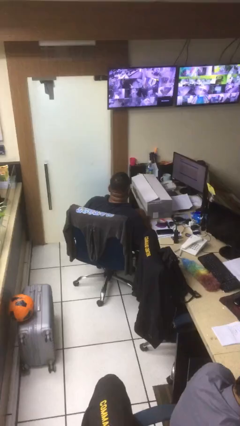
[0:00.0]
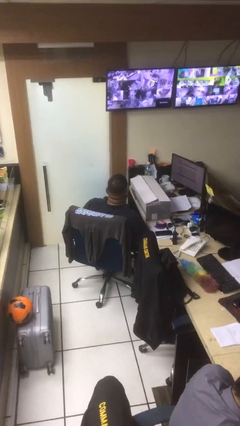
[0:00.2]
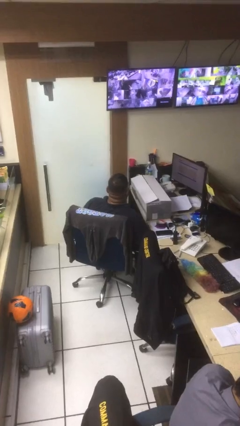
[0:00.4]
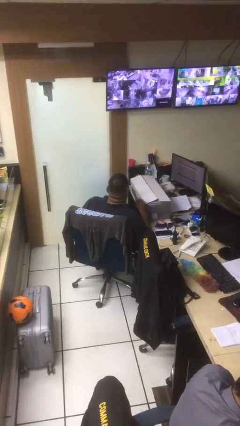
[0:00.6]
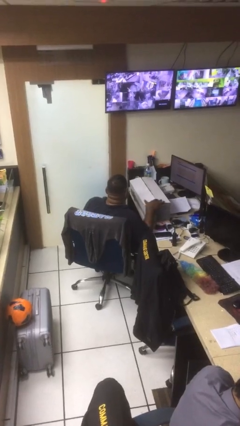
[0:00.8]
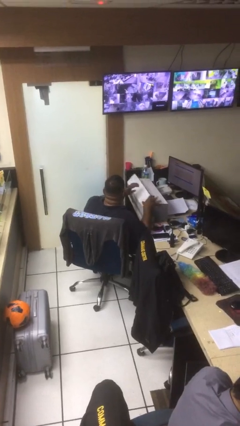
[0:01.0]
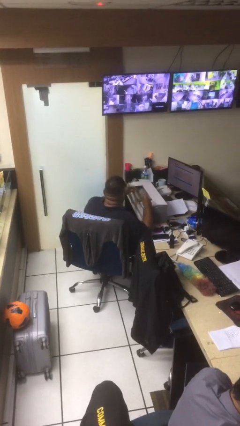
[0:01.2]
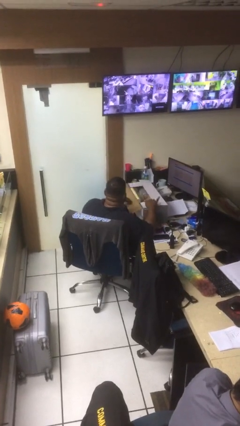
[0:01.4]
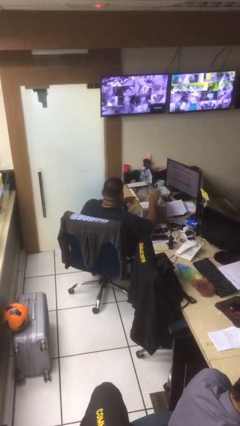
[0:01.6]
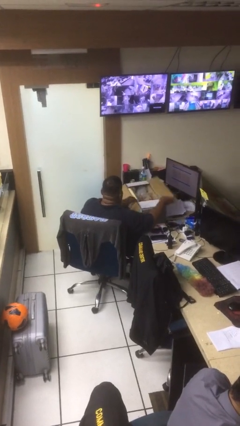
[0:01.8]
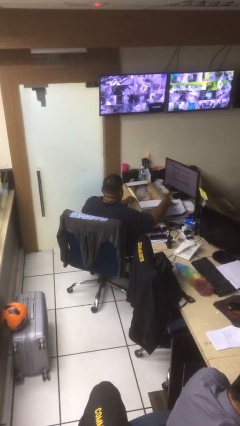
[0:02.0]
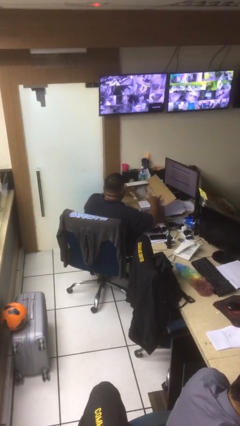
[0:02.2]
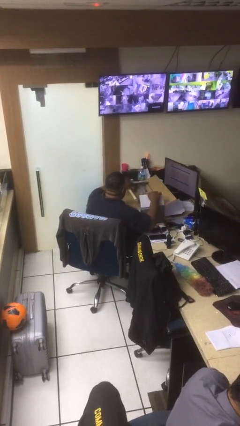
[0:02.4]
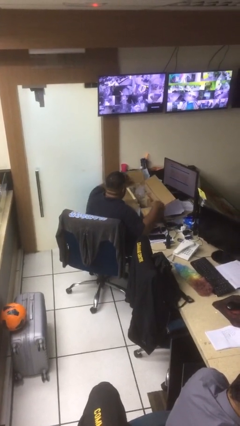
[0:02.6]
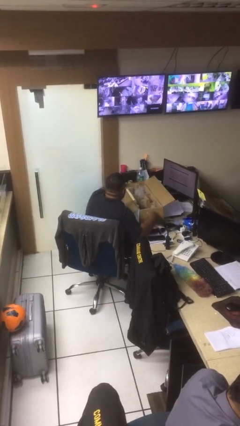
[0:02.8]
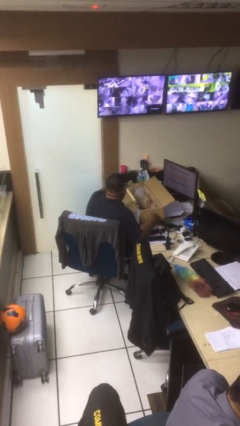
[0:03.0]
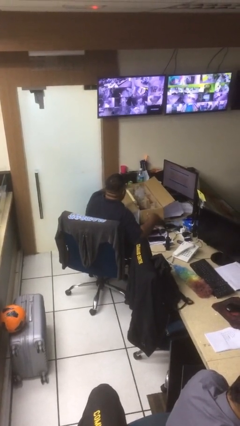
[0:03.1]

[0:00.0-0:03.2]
person opens box

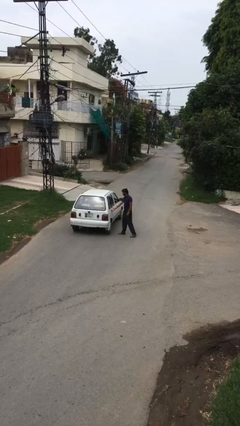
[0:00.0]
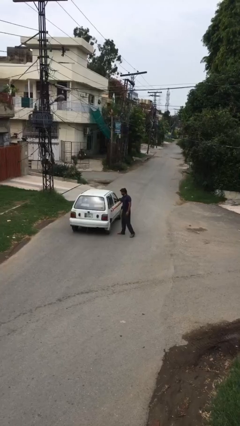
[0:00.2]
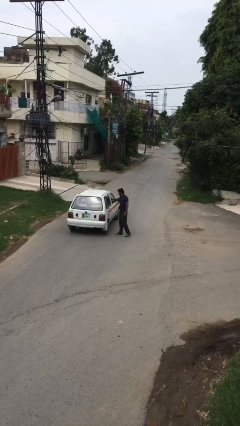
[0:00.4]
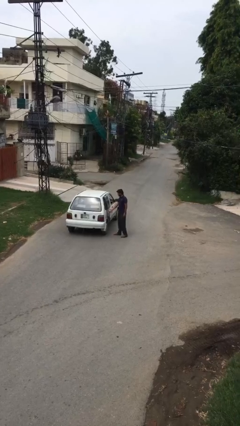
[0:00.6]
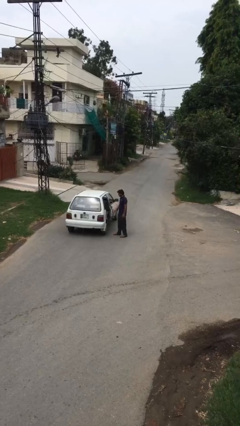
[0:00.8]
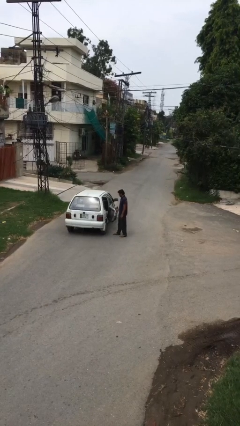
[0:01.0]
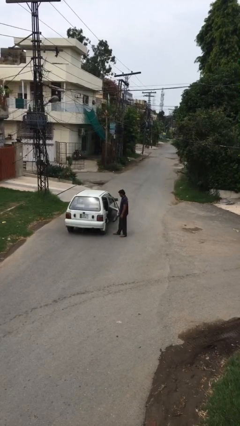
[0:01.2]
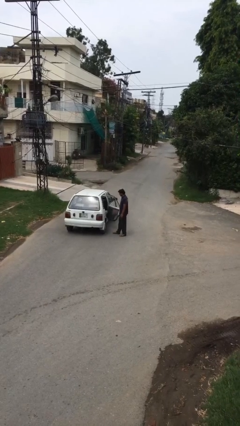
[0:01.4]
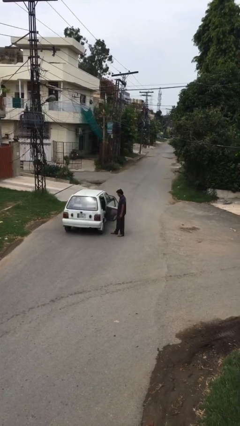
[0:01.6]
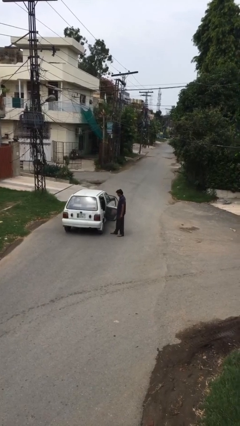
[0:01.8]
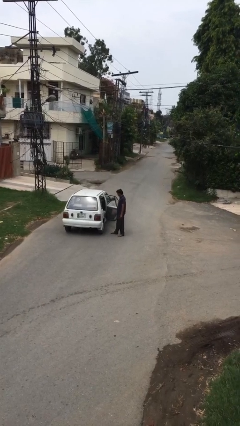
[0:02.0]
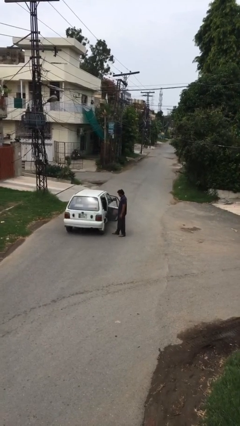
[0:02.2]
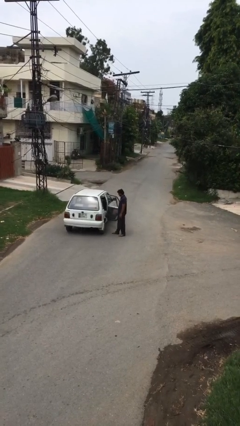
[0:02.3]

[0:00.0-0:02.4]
person opens car door

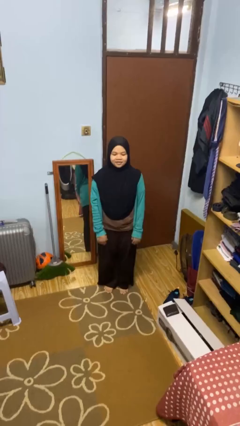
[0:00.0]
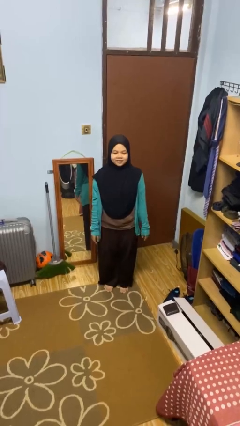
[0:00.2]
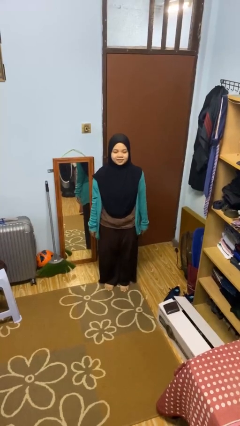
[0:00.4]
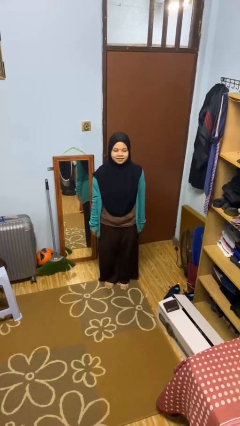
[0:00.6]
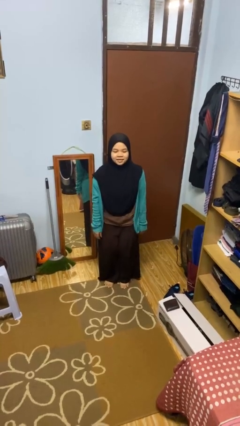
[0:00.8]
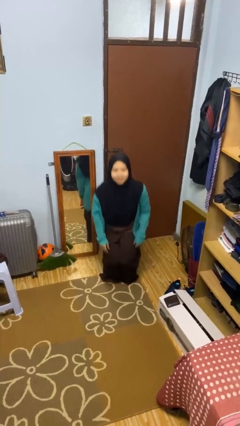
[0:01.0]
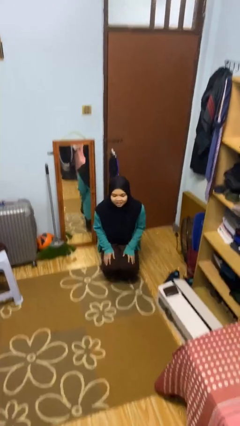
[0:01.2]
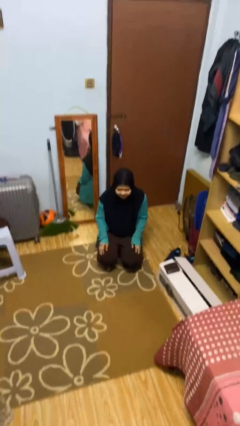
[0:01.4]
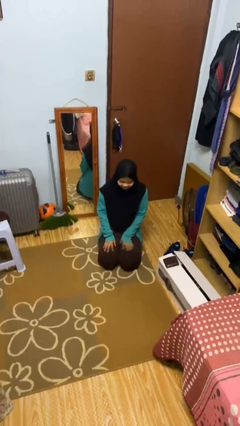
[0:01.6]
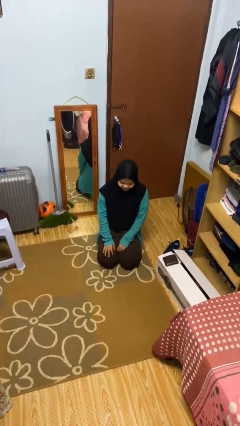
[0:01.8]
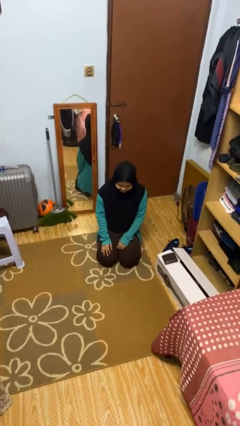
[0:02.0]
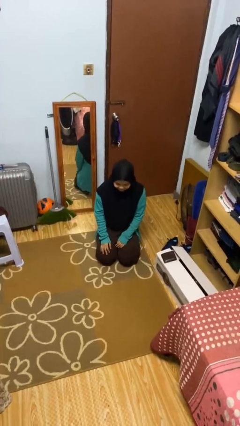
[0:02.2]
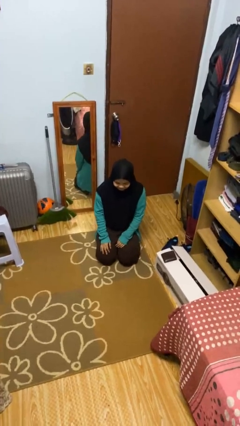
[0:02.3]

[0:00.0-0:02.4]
person kneels

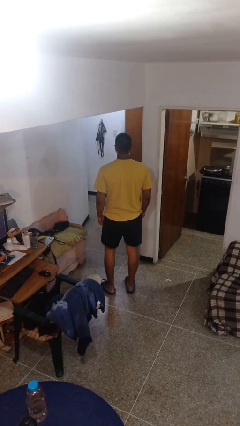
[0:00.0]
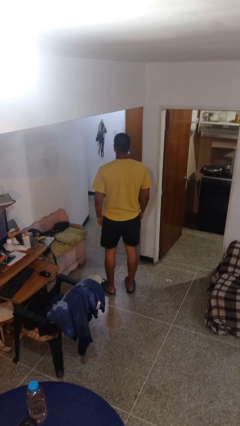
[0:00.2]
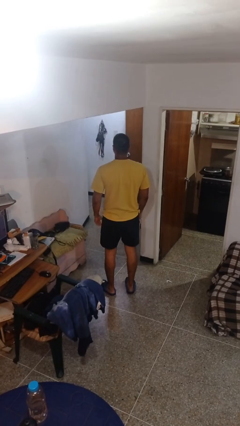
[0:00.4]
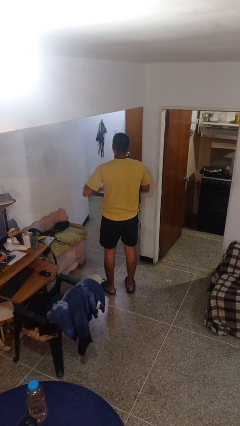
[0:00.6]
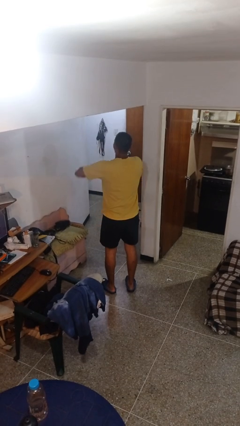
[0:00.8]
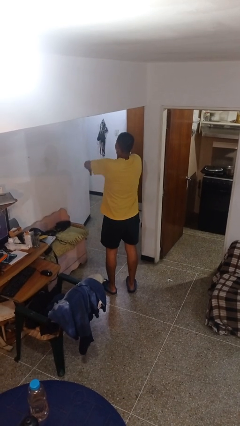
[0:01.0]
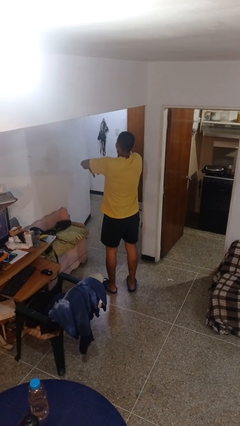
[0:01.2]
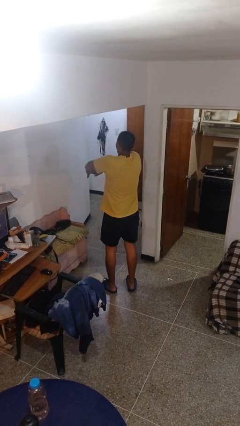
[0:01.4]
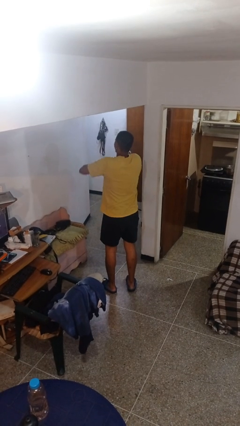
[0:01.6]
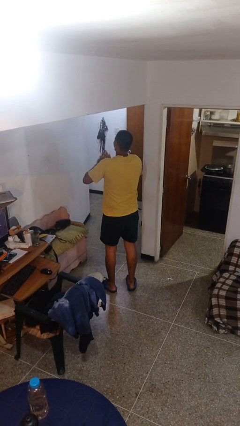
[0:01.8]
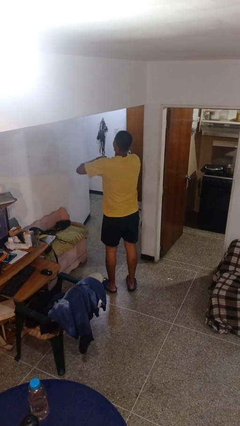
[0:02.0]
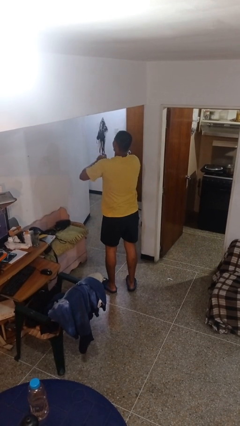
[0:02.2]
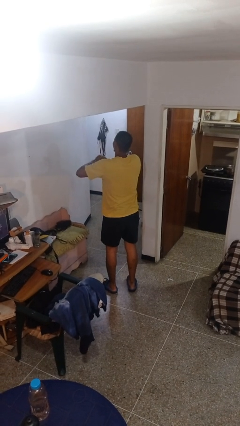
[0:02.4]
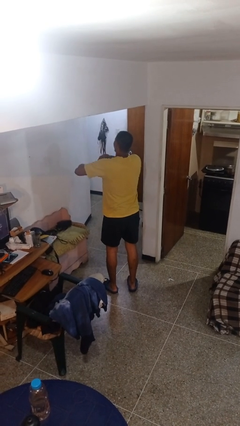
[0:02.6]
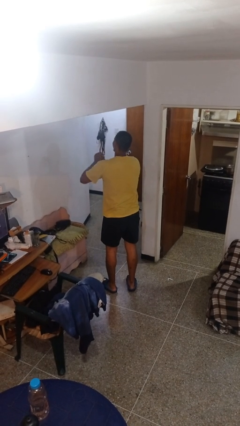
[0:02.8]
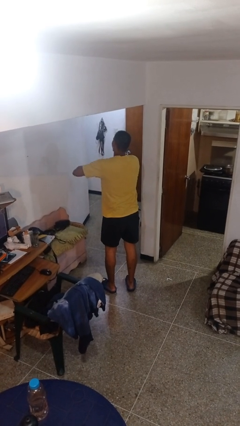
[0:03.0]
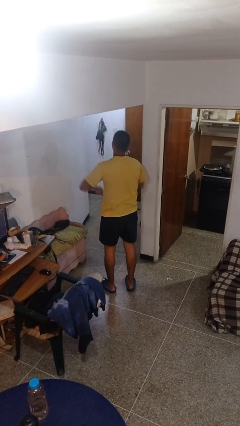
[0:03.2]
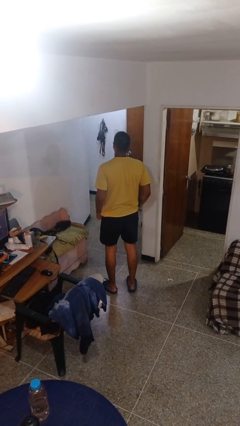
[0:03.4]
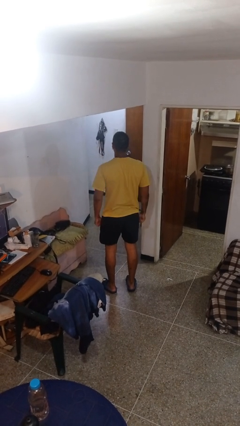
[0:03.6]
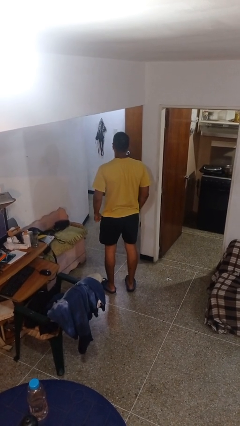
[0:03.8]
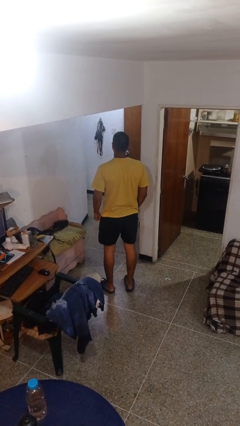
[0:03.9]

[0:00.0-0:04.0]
person cracks knuckles

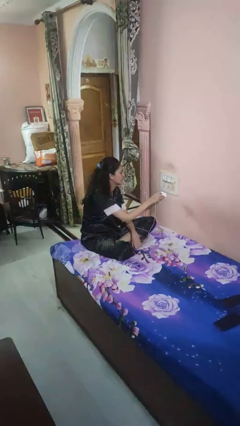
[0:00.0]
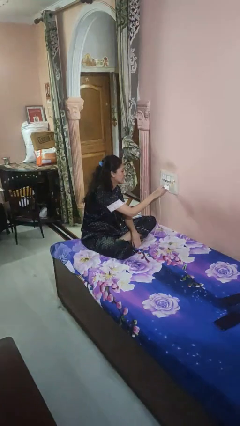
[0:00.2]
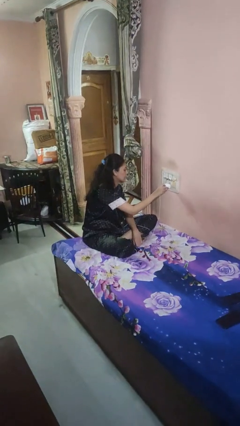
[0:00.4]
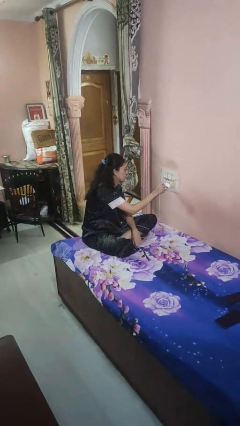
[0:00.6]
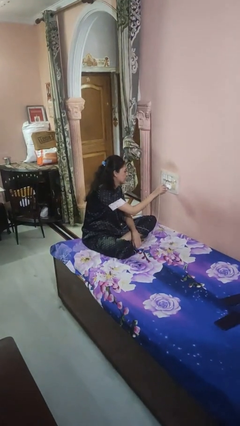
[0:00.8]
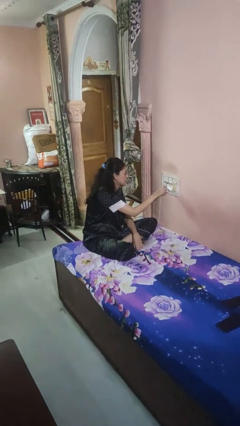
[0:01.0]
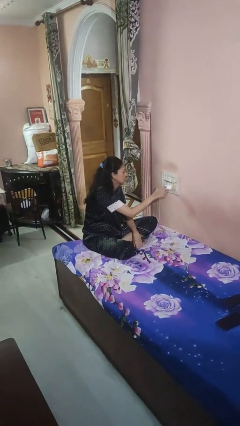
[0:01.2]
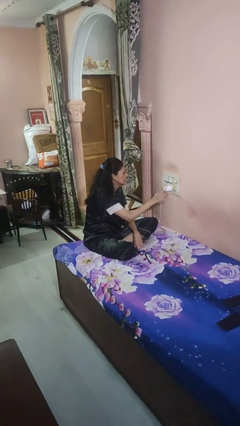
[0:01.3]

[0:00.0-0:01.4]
person plugs into electrical socket

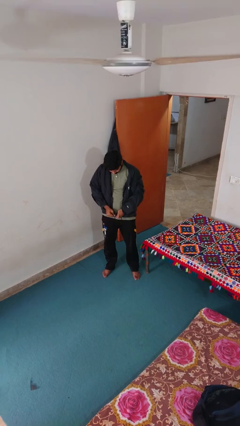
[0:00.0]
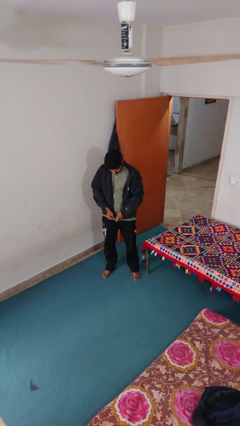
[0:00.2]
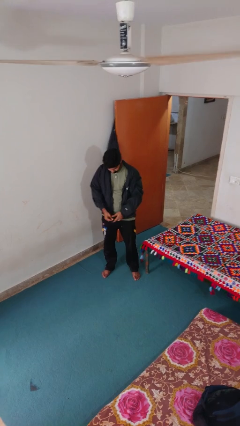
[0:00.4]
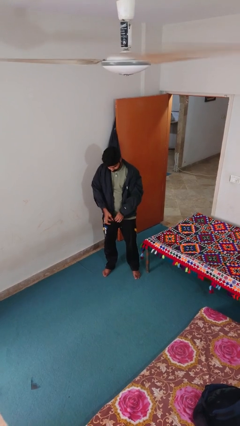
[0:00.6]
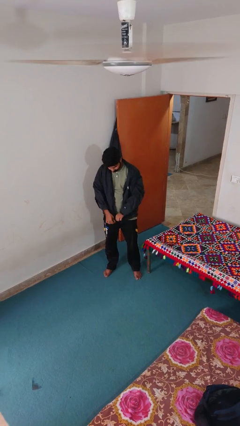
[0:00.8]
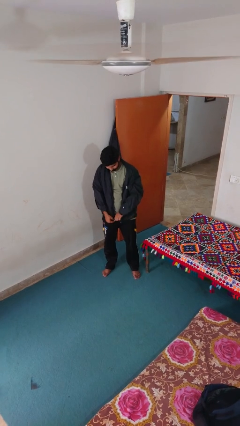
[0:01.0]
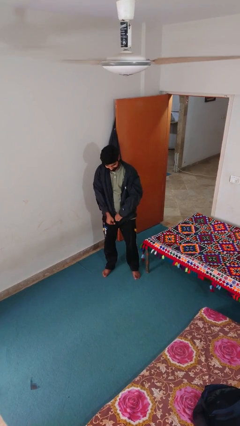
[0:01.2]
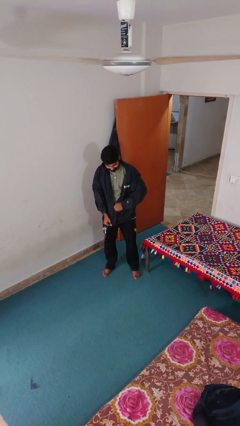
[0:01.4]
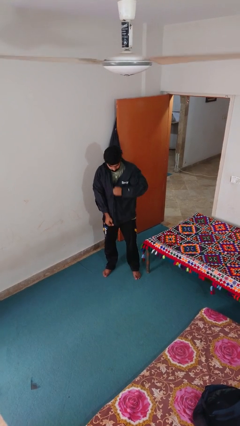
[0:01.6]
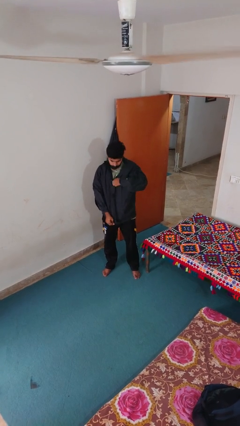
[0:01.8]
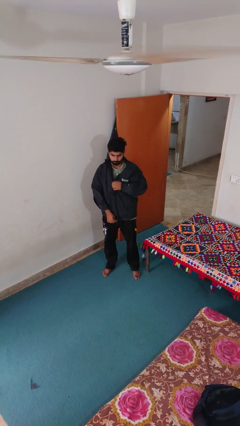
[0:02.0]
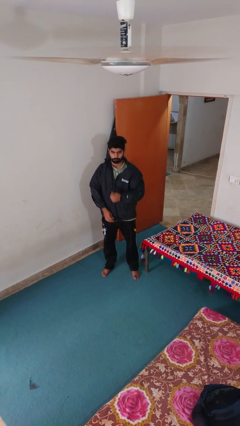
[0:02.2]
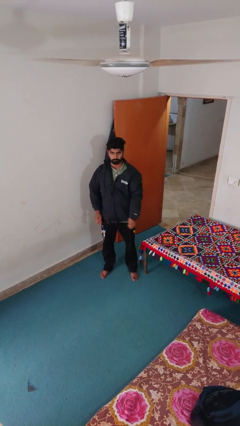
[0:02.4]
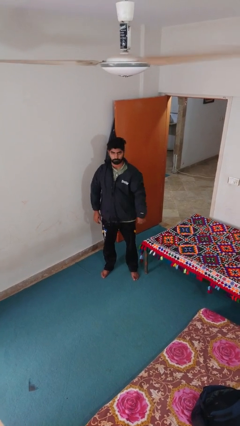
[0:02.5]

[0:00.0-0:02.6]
person zips up jacket

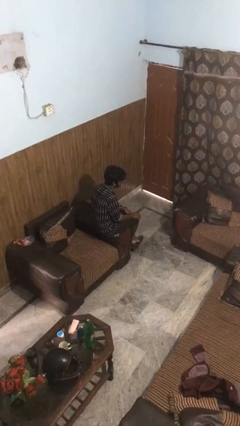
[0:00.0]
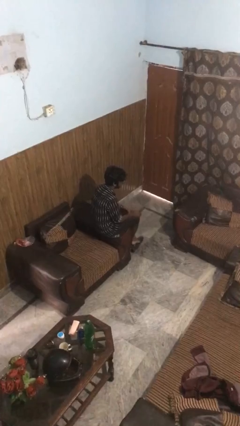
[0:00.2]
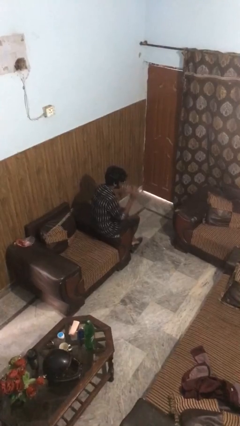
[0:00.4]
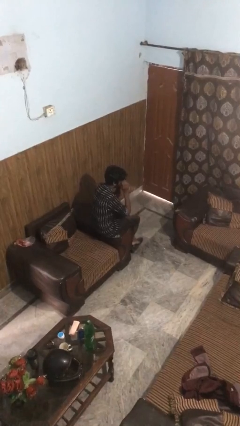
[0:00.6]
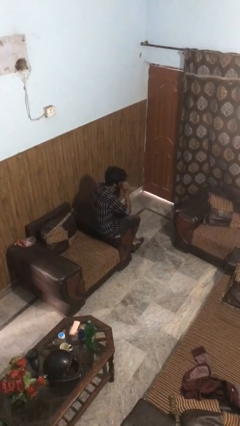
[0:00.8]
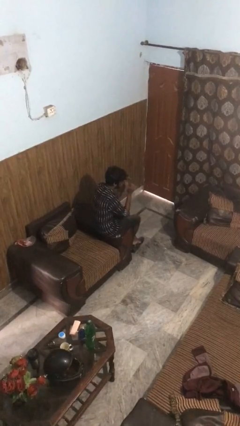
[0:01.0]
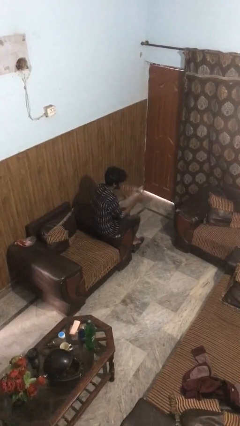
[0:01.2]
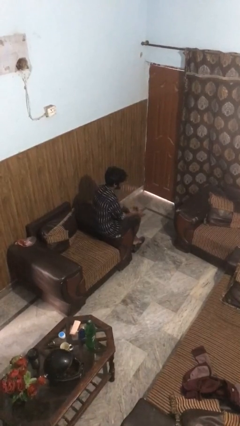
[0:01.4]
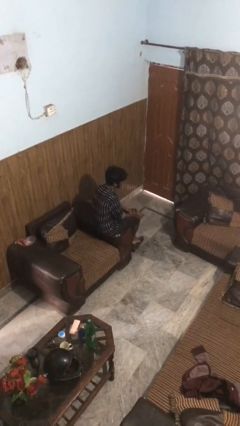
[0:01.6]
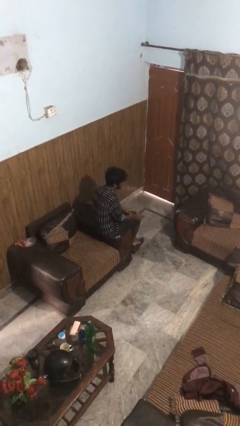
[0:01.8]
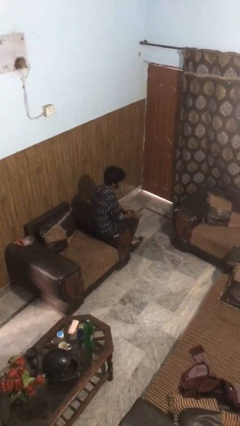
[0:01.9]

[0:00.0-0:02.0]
person takes off sunglasses
